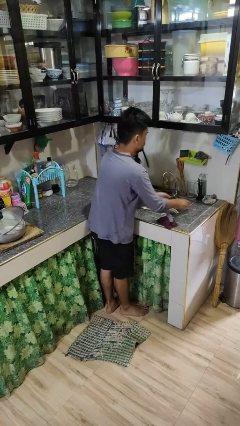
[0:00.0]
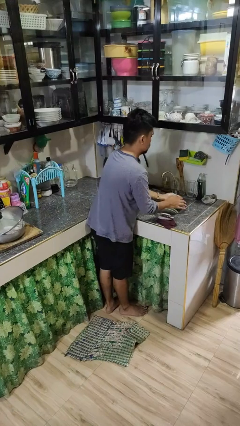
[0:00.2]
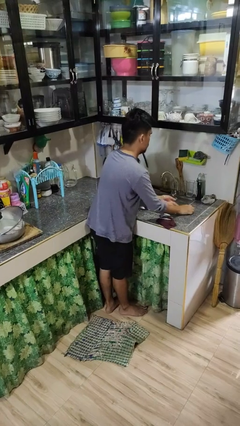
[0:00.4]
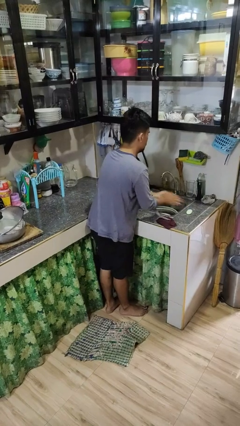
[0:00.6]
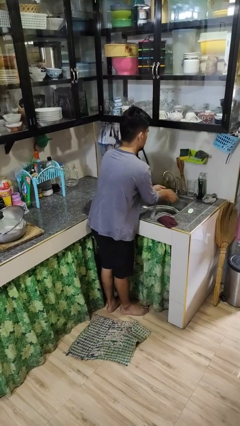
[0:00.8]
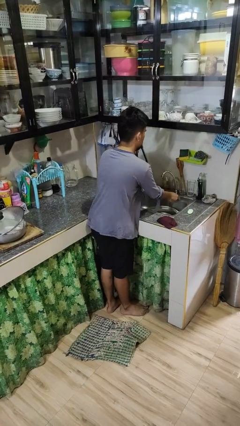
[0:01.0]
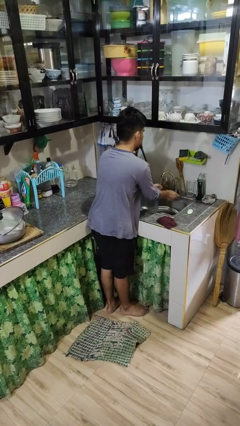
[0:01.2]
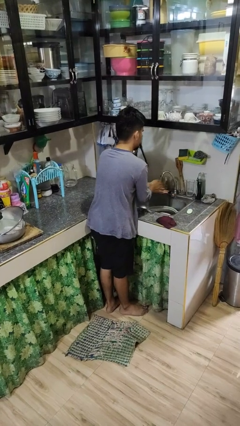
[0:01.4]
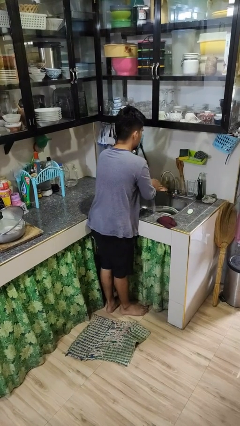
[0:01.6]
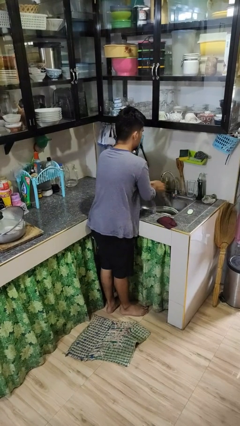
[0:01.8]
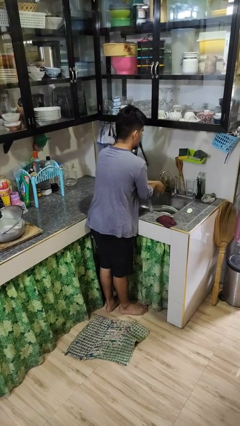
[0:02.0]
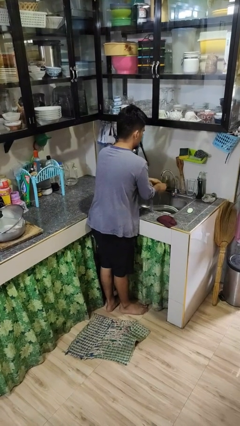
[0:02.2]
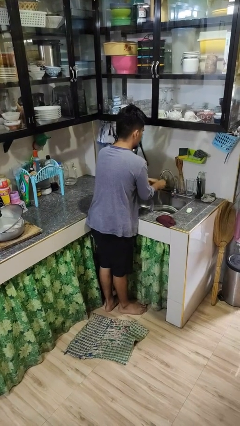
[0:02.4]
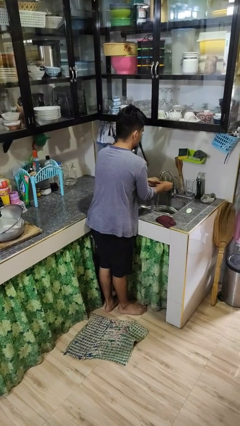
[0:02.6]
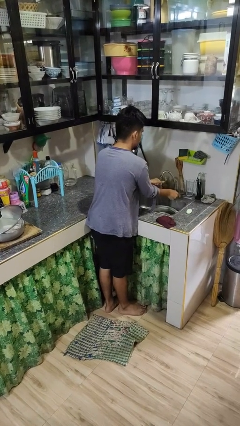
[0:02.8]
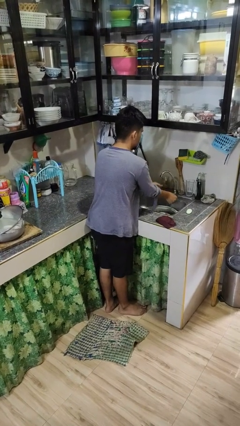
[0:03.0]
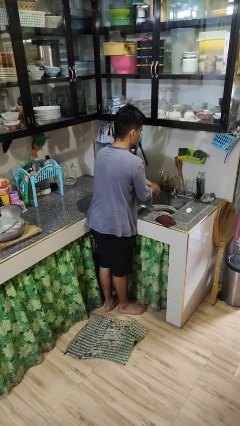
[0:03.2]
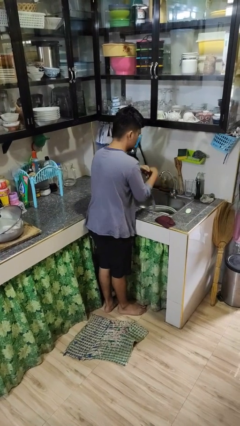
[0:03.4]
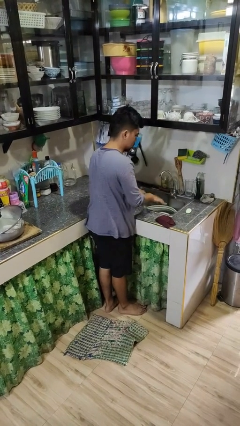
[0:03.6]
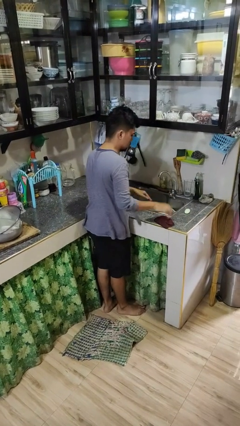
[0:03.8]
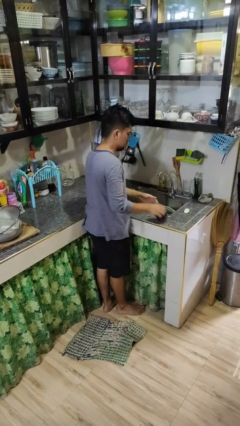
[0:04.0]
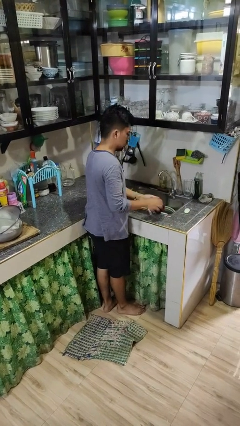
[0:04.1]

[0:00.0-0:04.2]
person washes hands

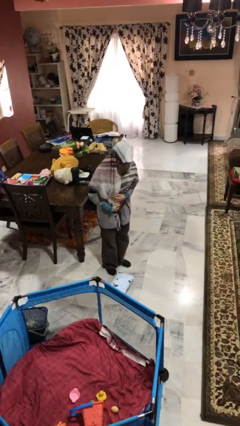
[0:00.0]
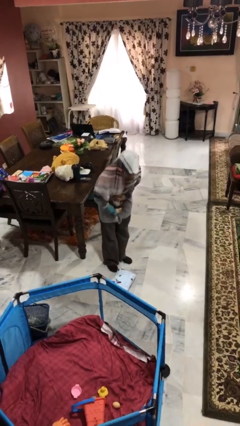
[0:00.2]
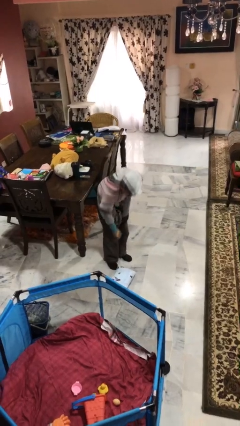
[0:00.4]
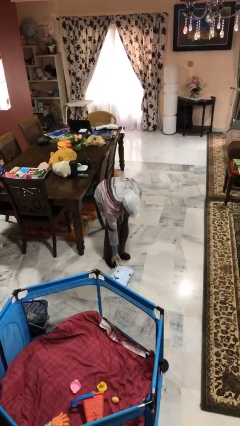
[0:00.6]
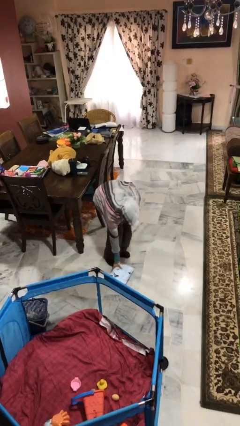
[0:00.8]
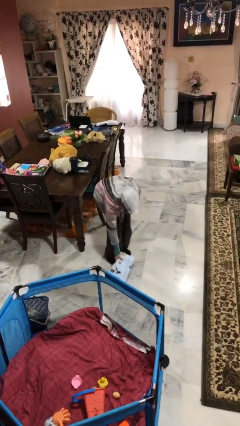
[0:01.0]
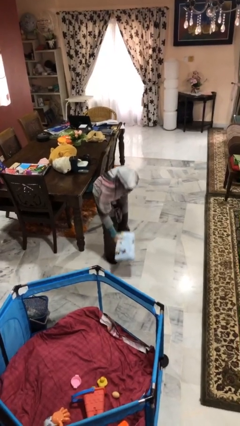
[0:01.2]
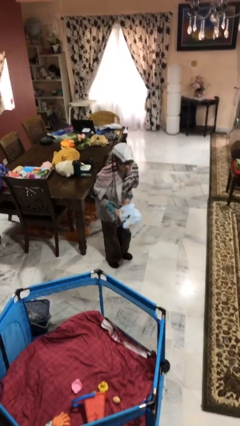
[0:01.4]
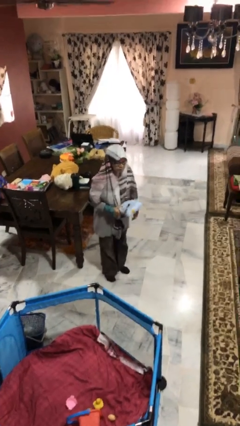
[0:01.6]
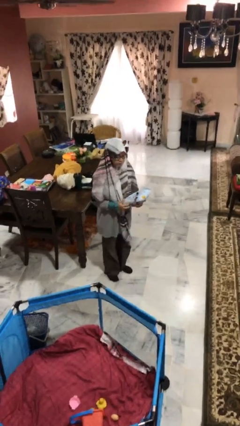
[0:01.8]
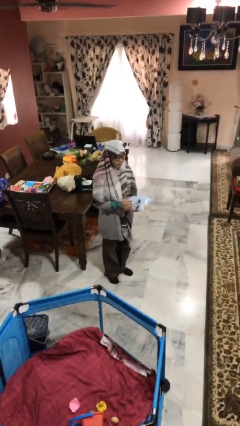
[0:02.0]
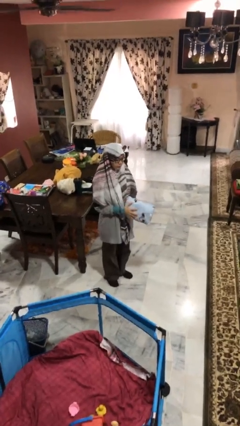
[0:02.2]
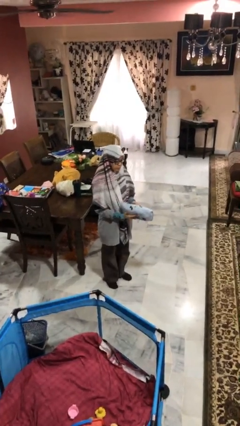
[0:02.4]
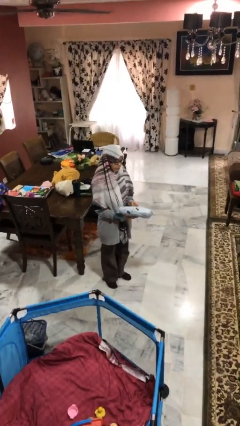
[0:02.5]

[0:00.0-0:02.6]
person picks up object from floor

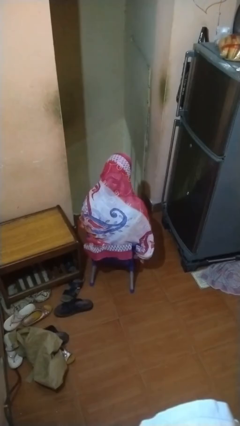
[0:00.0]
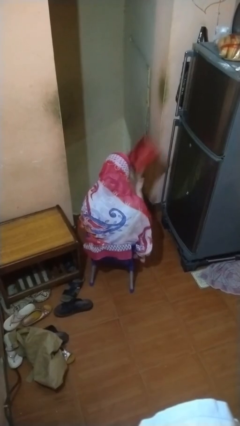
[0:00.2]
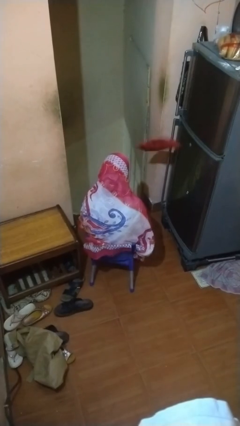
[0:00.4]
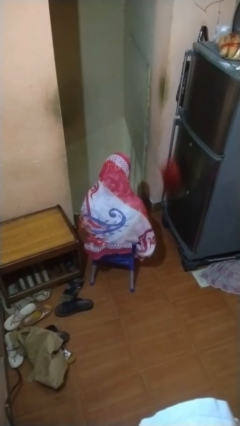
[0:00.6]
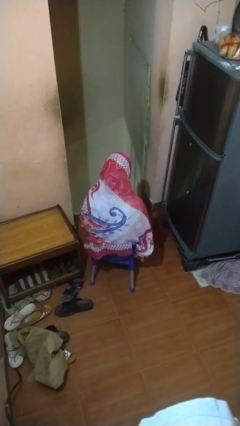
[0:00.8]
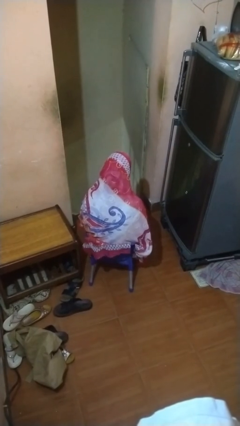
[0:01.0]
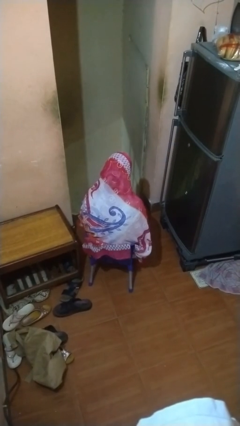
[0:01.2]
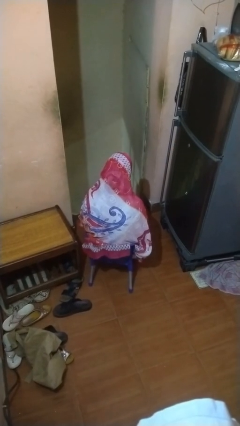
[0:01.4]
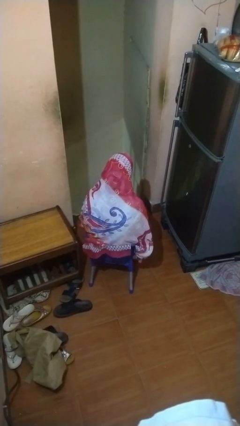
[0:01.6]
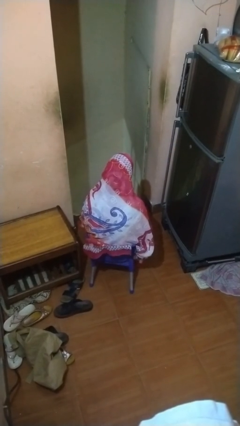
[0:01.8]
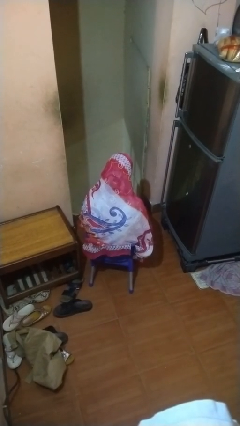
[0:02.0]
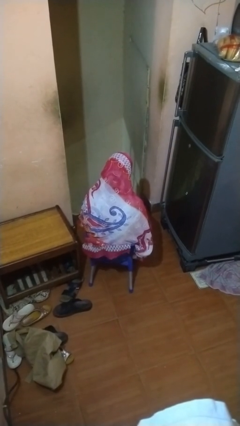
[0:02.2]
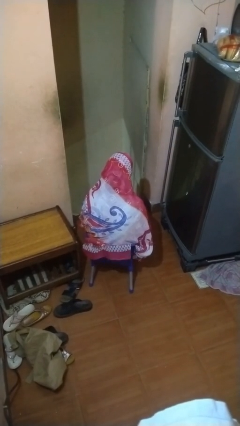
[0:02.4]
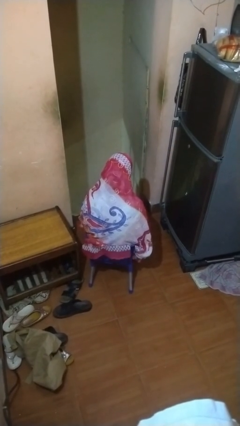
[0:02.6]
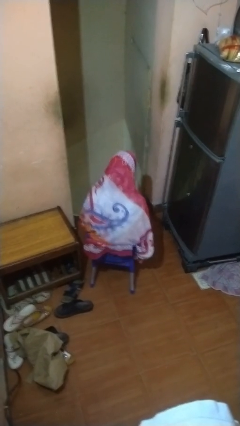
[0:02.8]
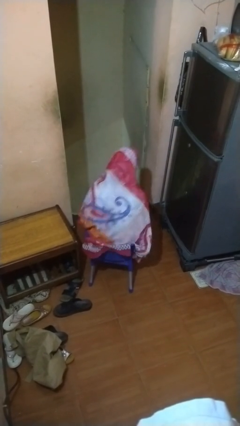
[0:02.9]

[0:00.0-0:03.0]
person throws object into air

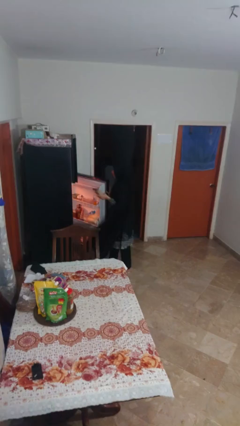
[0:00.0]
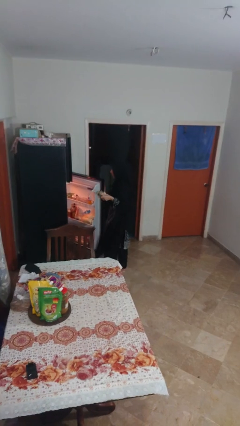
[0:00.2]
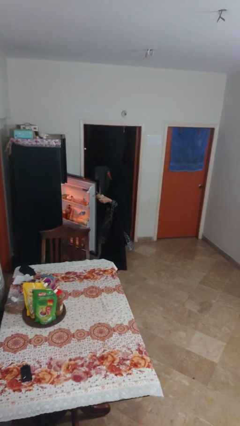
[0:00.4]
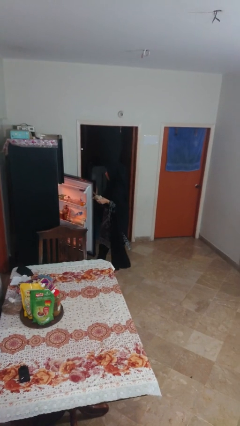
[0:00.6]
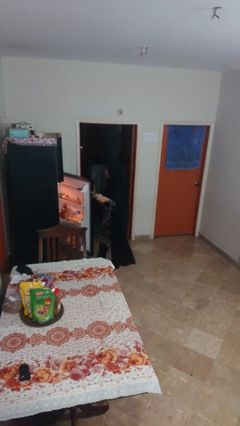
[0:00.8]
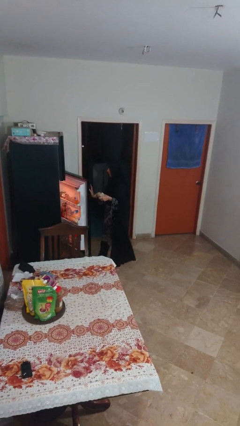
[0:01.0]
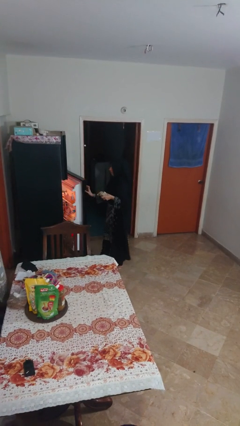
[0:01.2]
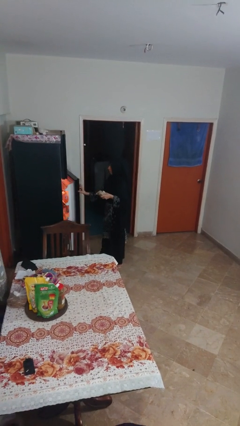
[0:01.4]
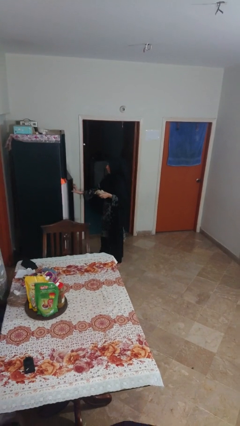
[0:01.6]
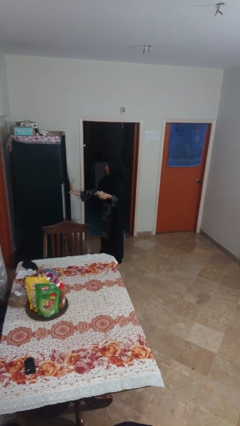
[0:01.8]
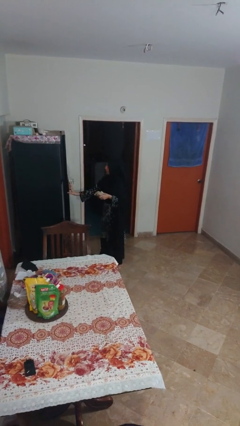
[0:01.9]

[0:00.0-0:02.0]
person closes refrigerator

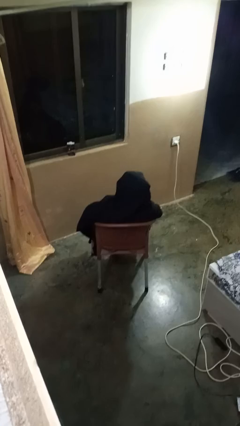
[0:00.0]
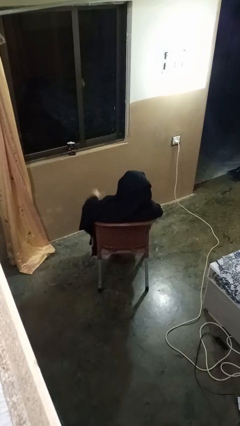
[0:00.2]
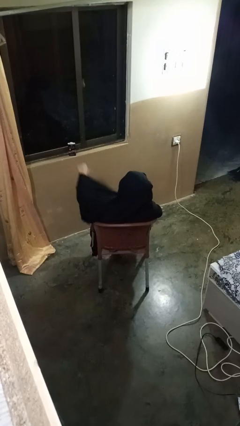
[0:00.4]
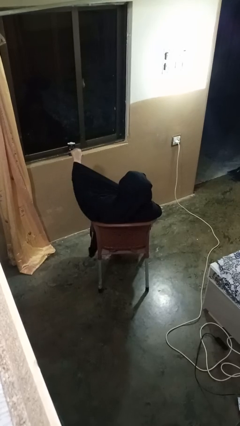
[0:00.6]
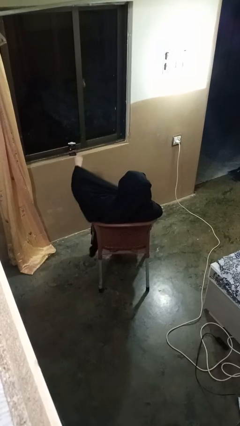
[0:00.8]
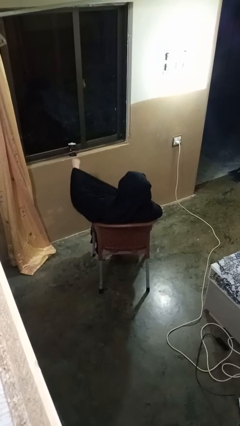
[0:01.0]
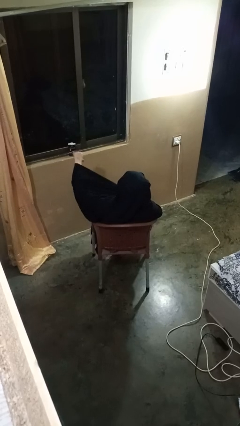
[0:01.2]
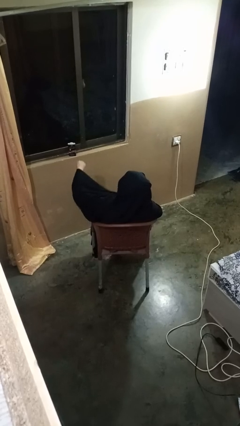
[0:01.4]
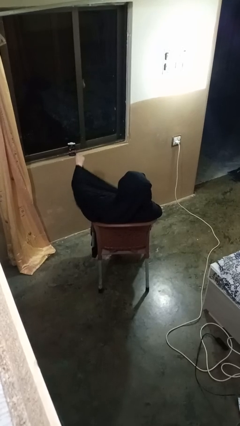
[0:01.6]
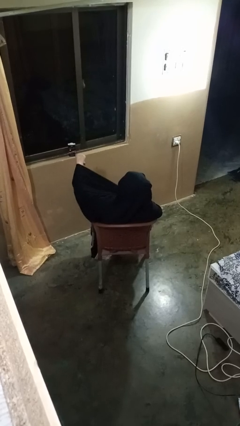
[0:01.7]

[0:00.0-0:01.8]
person gestures thumbs down

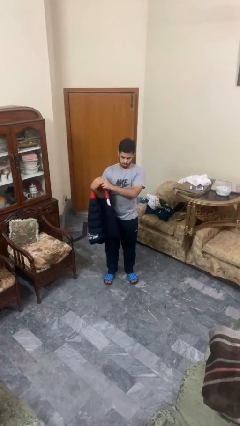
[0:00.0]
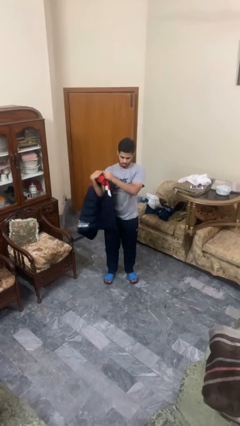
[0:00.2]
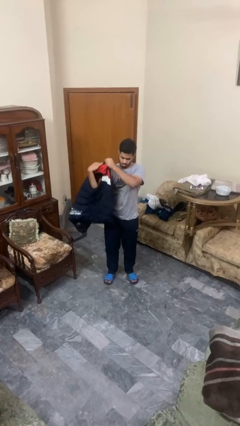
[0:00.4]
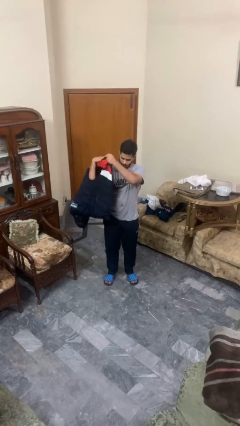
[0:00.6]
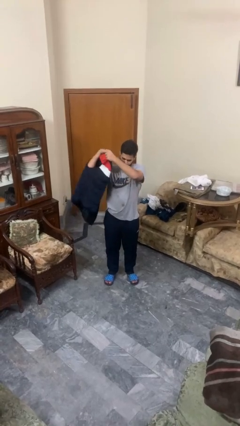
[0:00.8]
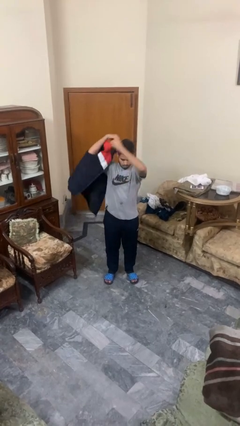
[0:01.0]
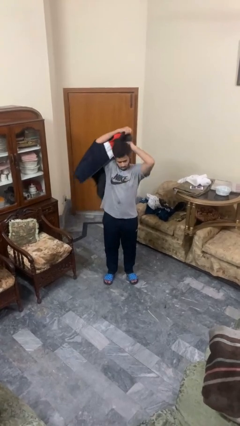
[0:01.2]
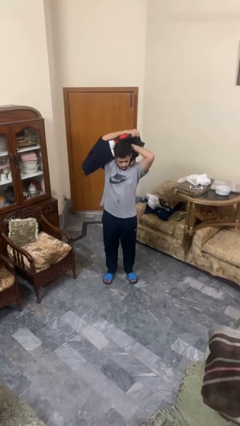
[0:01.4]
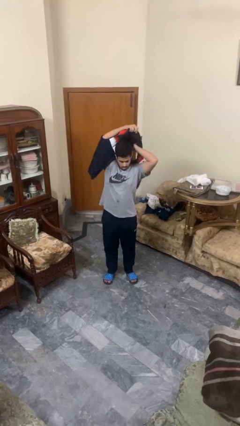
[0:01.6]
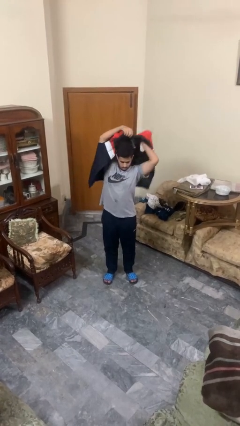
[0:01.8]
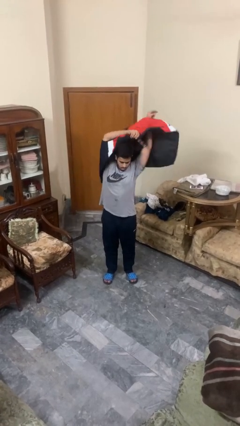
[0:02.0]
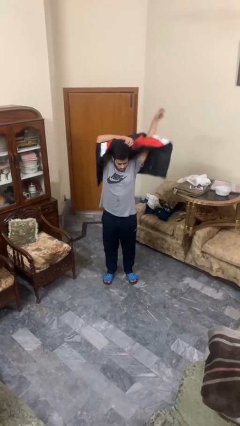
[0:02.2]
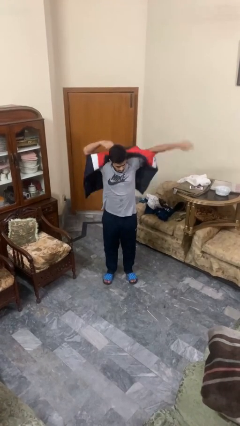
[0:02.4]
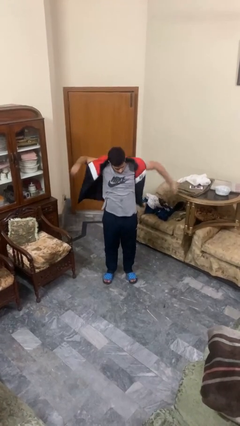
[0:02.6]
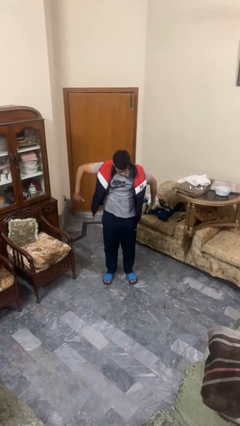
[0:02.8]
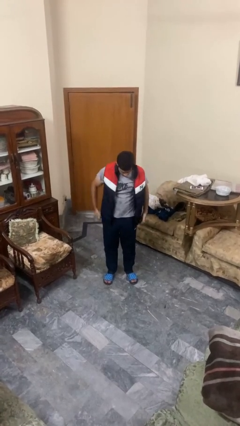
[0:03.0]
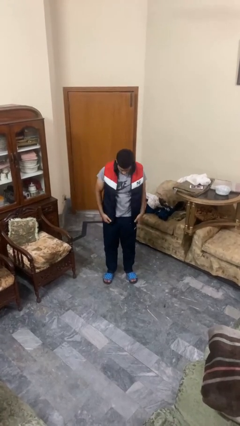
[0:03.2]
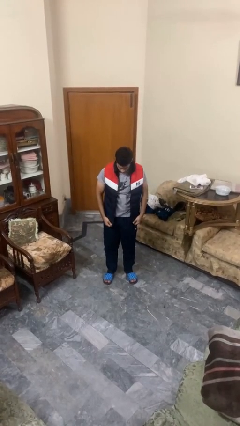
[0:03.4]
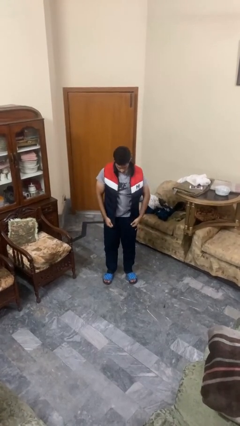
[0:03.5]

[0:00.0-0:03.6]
person puts on jacket
